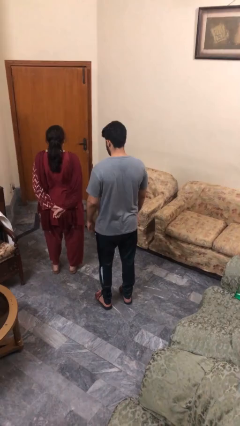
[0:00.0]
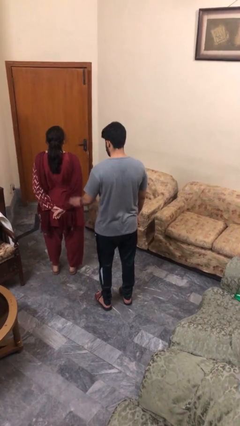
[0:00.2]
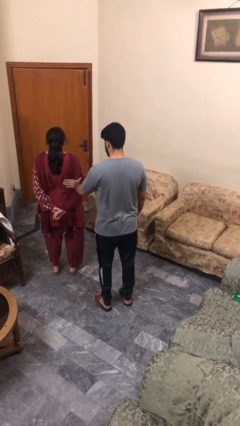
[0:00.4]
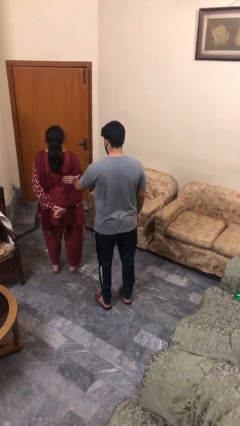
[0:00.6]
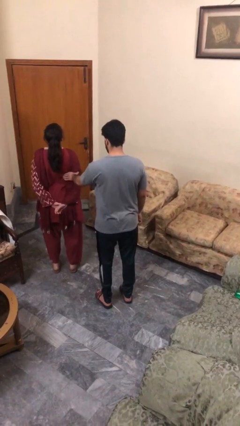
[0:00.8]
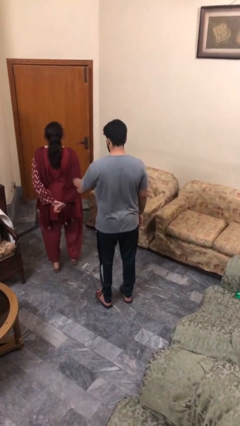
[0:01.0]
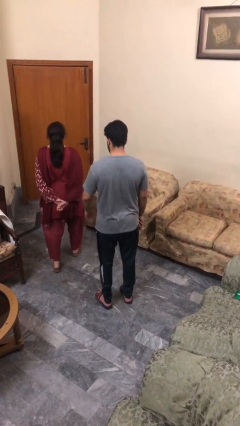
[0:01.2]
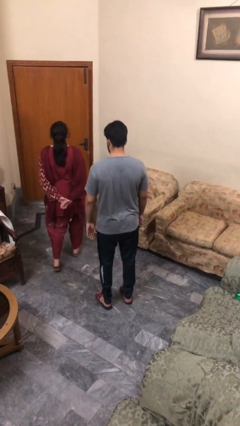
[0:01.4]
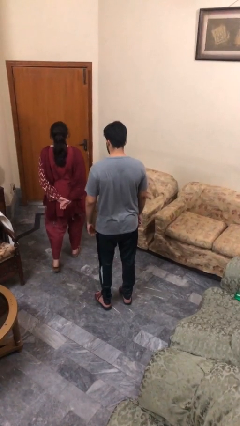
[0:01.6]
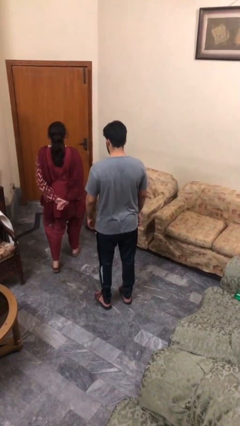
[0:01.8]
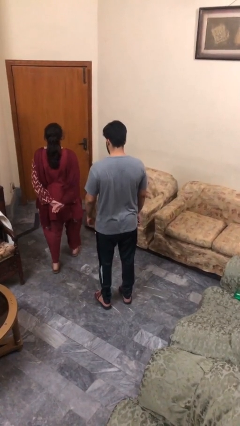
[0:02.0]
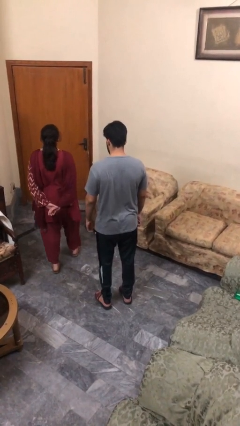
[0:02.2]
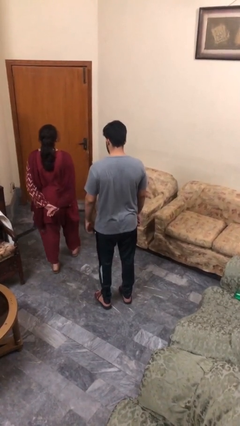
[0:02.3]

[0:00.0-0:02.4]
person shoves person

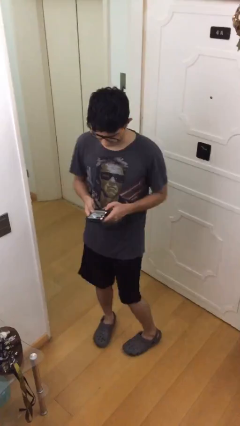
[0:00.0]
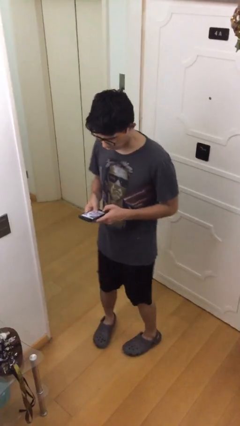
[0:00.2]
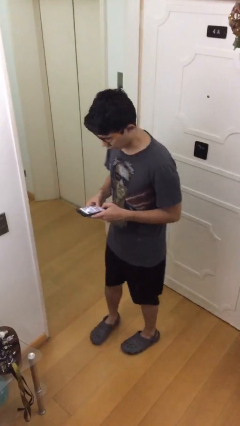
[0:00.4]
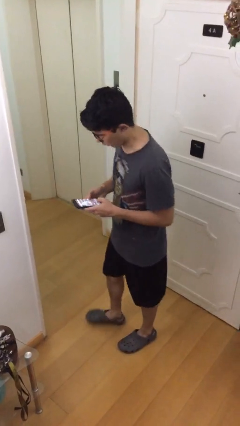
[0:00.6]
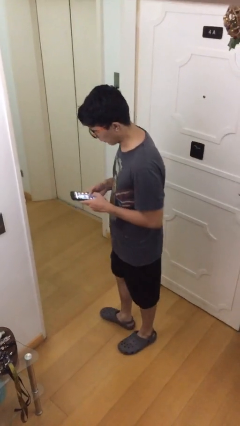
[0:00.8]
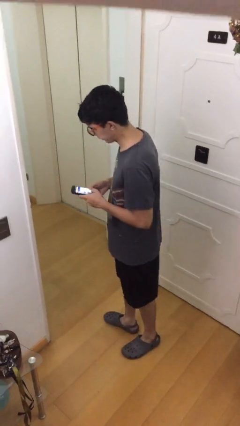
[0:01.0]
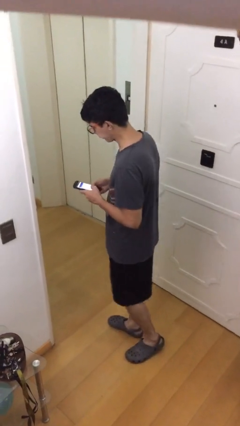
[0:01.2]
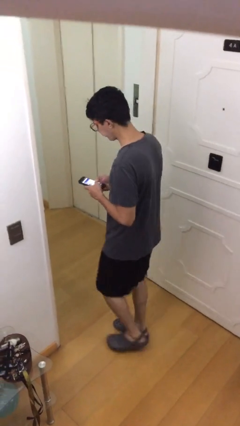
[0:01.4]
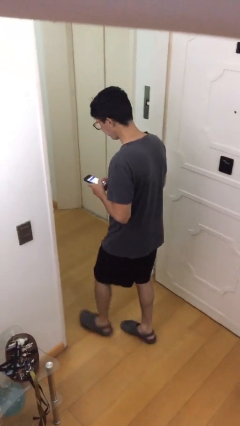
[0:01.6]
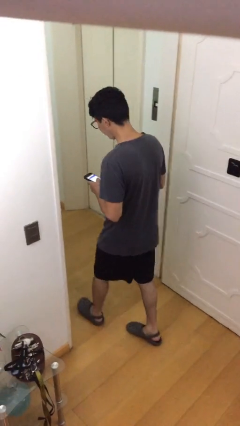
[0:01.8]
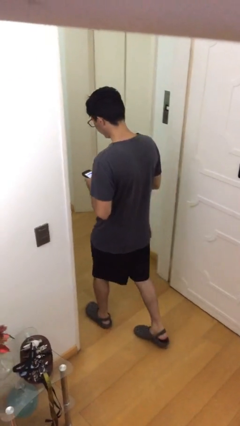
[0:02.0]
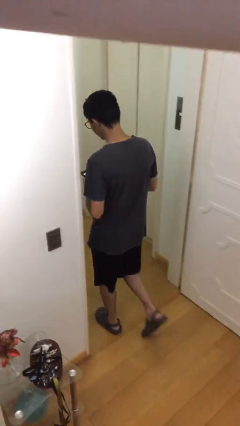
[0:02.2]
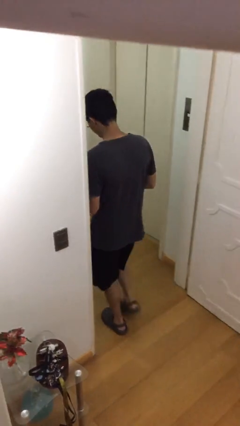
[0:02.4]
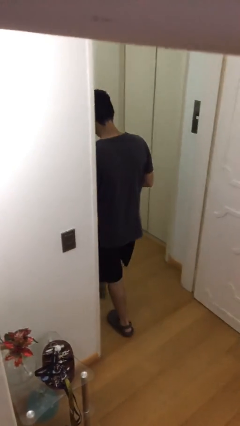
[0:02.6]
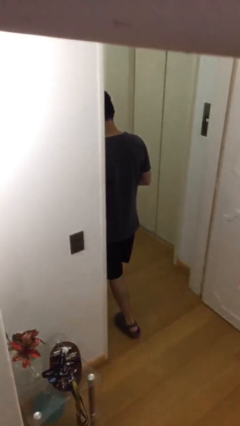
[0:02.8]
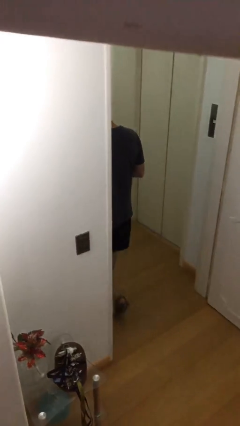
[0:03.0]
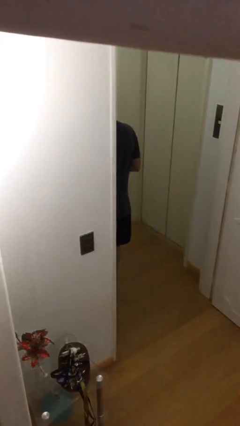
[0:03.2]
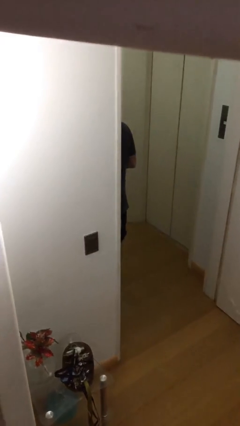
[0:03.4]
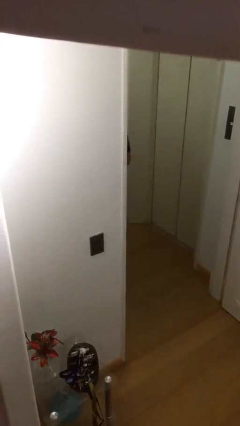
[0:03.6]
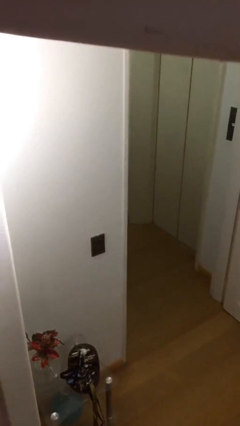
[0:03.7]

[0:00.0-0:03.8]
person exits scene through structure

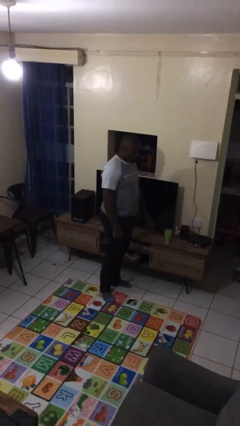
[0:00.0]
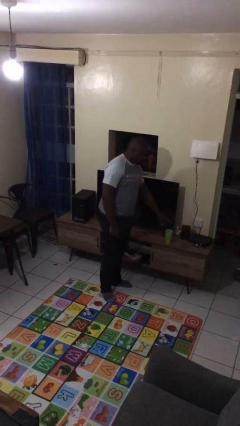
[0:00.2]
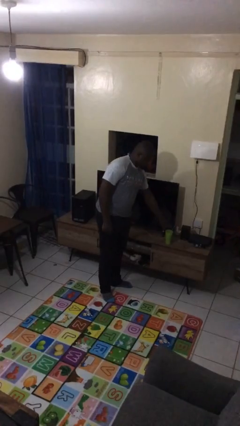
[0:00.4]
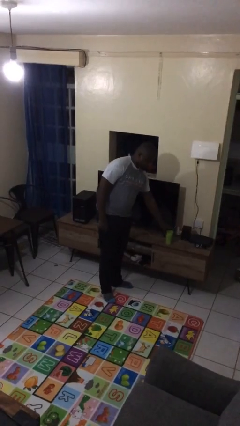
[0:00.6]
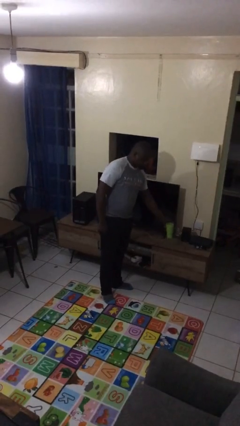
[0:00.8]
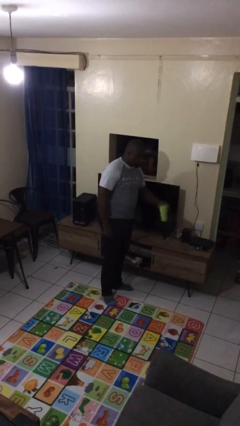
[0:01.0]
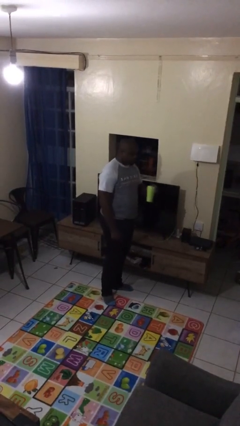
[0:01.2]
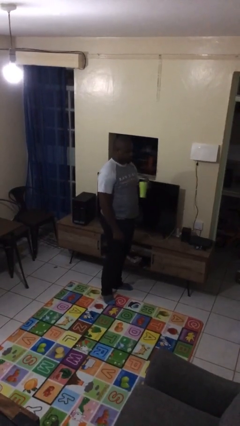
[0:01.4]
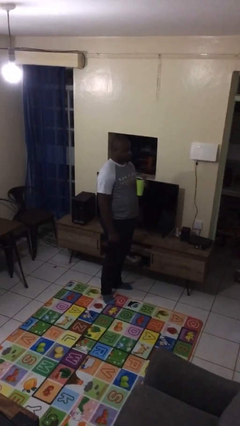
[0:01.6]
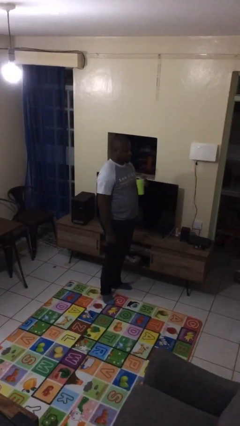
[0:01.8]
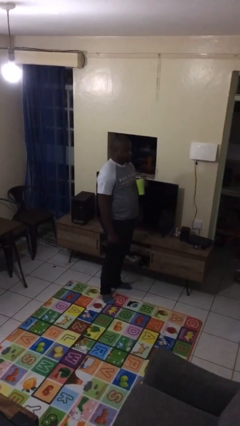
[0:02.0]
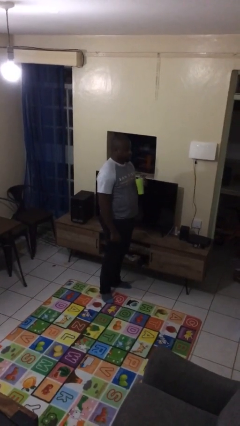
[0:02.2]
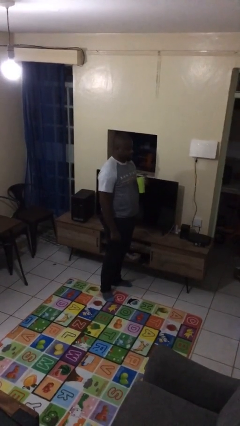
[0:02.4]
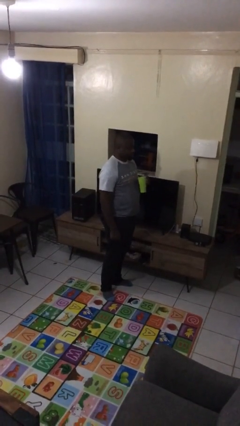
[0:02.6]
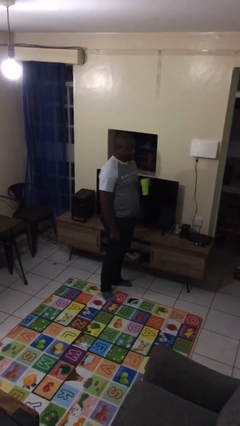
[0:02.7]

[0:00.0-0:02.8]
person picks up object from countertop

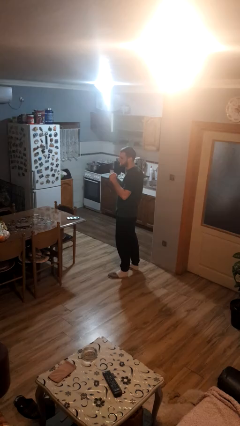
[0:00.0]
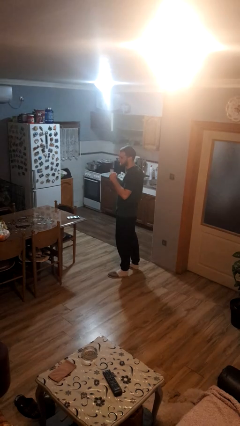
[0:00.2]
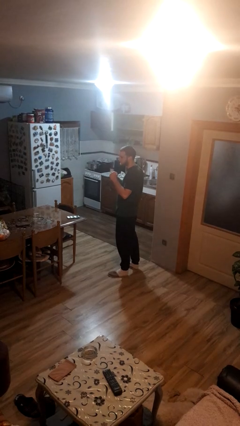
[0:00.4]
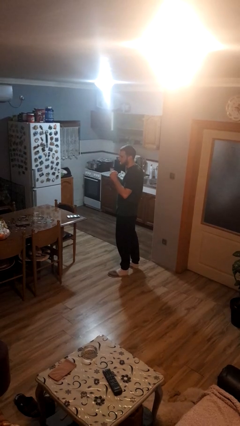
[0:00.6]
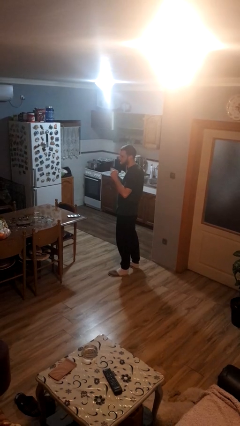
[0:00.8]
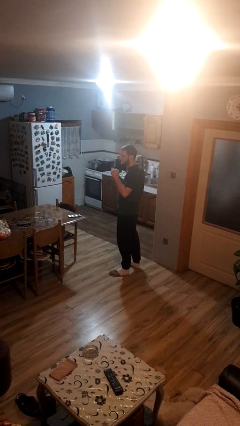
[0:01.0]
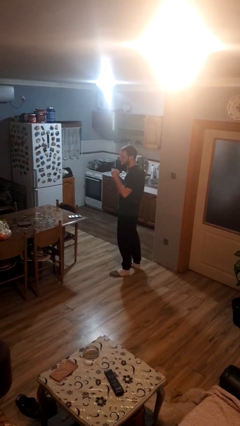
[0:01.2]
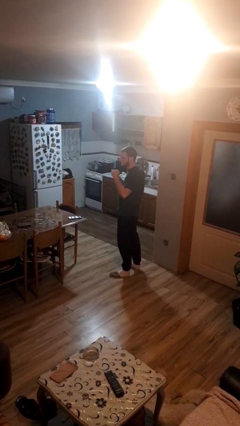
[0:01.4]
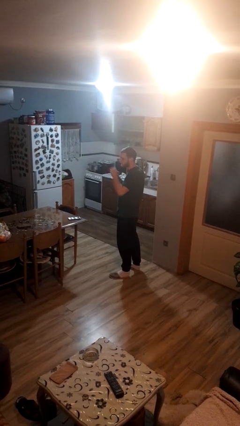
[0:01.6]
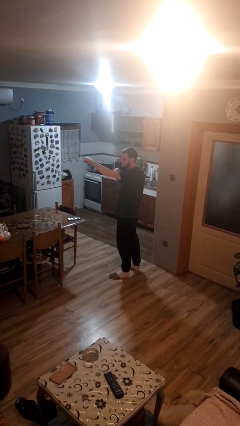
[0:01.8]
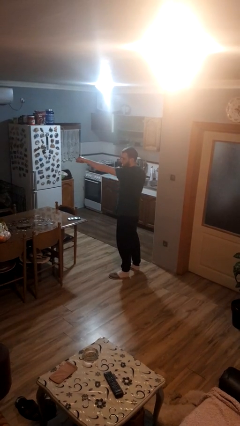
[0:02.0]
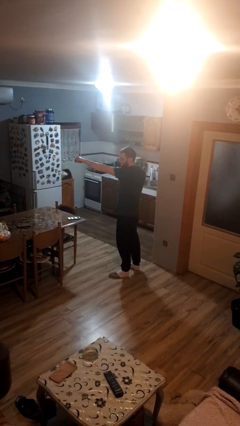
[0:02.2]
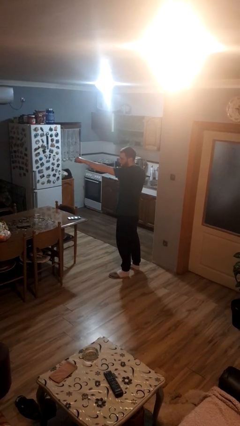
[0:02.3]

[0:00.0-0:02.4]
person punches

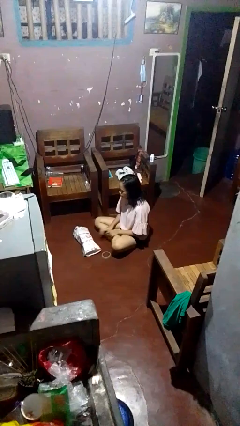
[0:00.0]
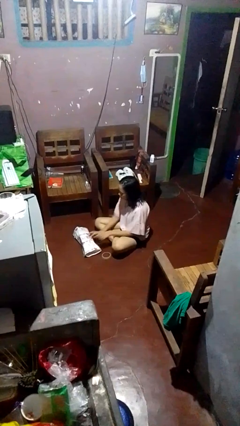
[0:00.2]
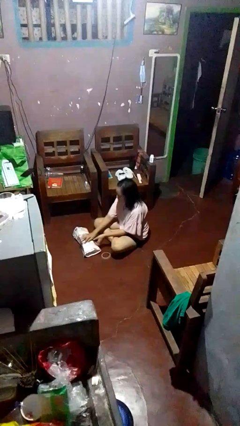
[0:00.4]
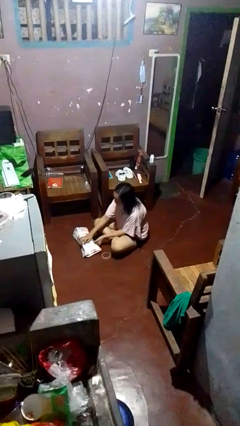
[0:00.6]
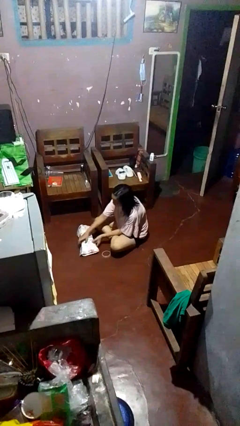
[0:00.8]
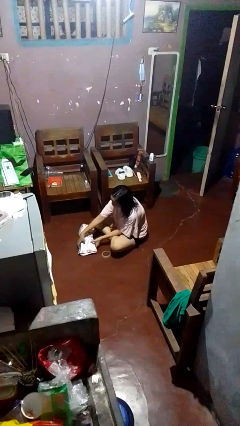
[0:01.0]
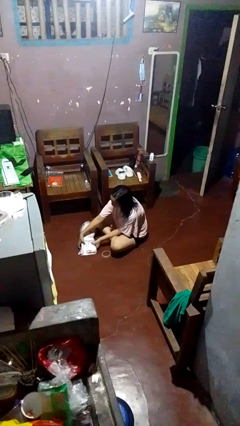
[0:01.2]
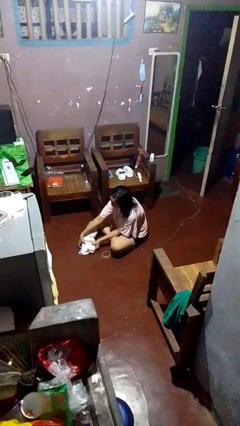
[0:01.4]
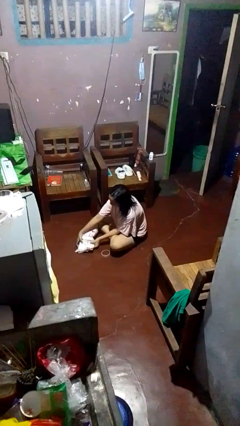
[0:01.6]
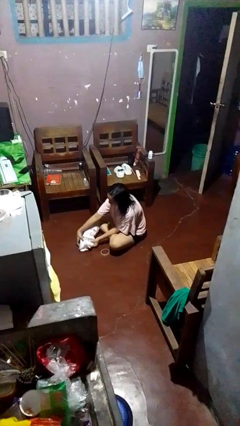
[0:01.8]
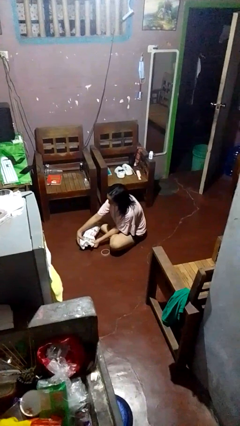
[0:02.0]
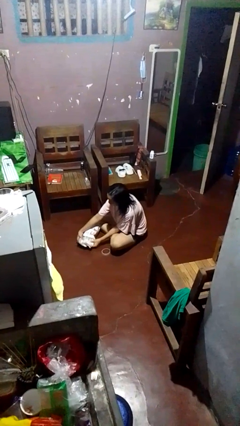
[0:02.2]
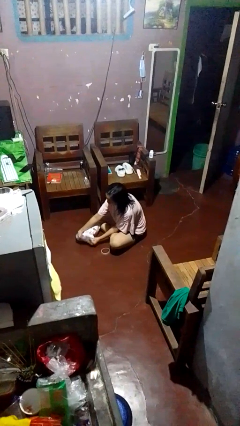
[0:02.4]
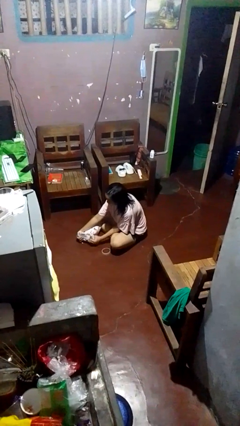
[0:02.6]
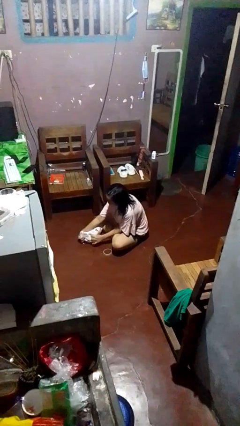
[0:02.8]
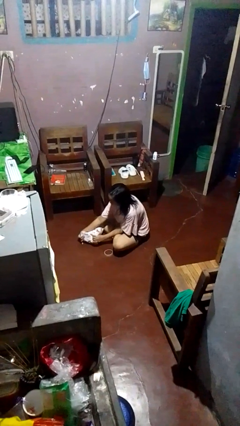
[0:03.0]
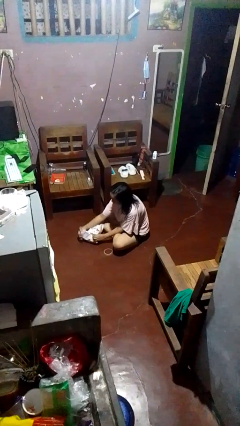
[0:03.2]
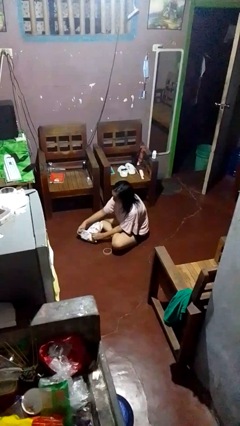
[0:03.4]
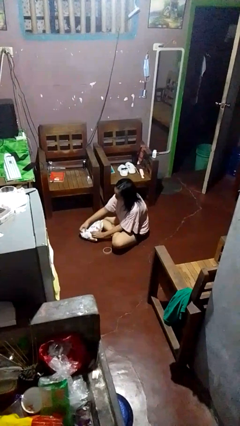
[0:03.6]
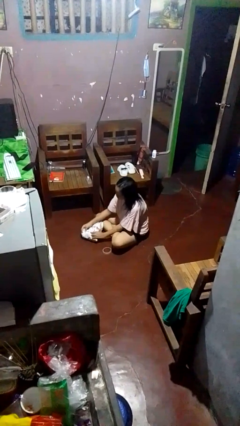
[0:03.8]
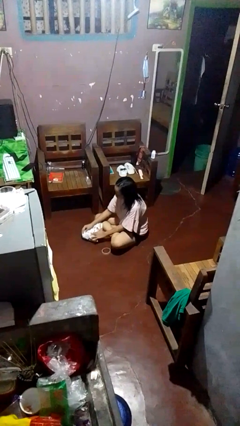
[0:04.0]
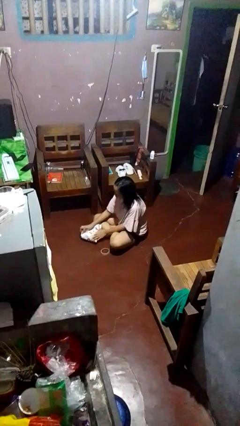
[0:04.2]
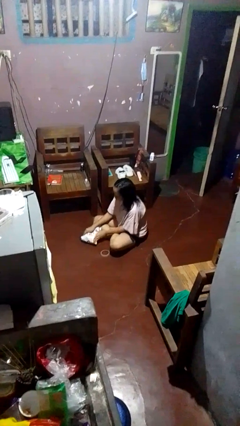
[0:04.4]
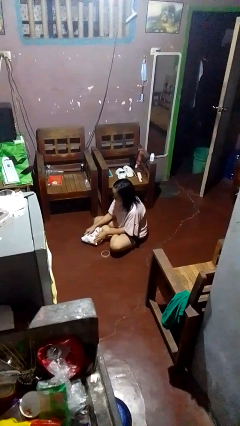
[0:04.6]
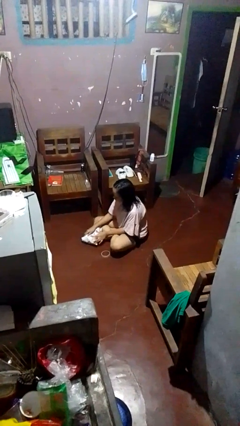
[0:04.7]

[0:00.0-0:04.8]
person wraps box

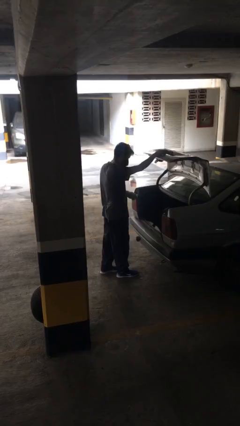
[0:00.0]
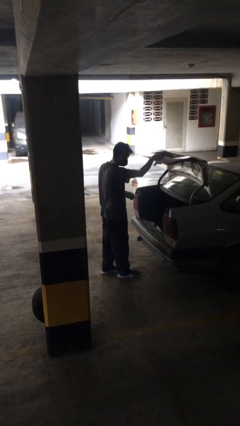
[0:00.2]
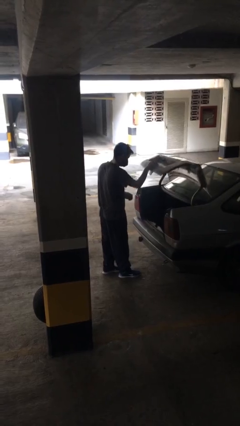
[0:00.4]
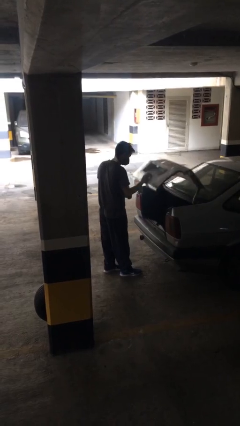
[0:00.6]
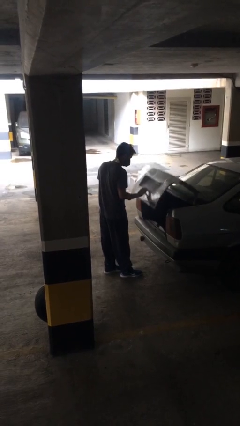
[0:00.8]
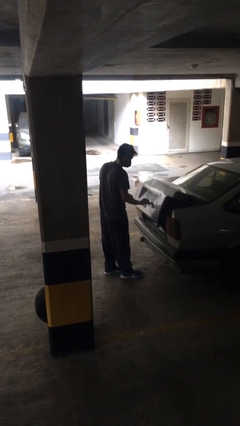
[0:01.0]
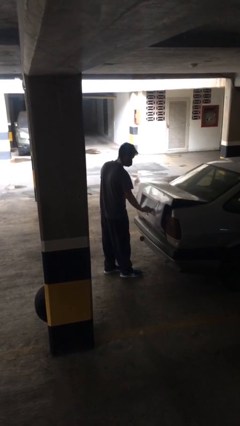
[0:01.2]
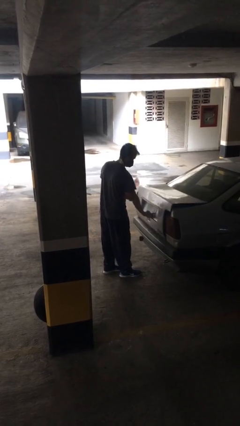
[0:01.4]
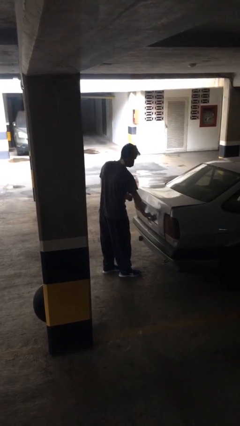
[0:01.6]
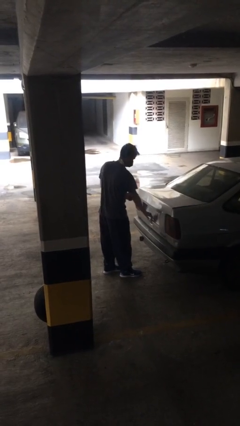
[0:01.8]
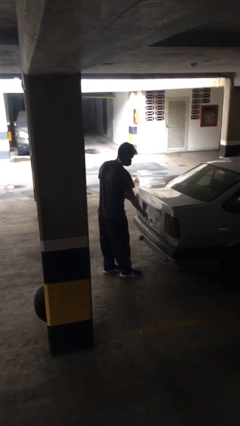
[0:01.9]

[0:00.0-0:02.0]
person closes car trunk
